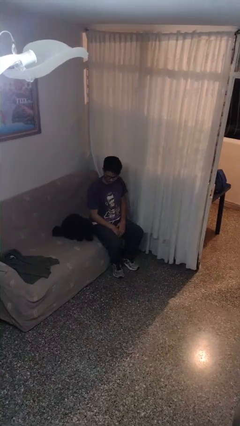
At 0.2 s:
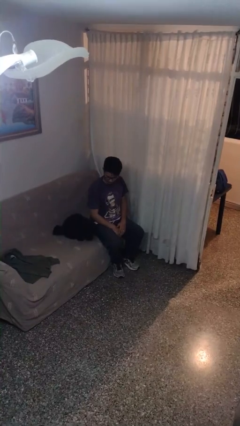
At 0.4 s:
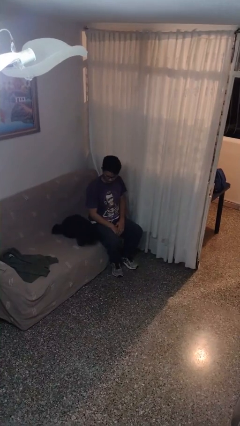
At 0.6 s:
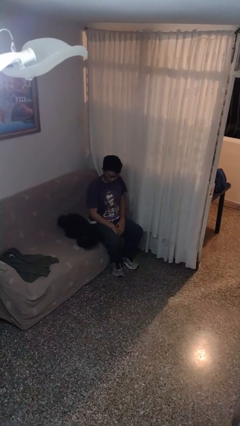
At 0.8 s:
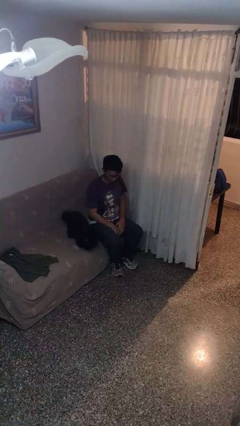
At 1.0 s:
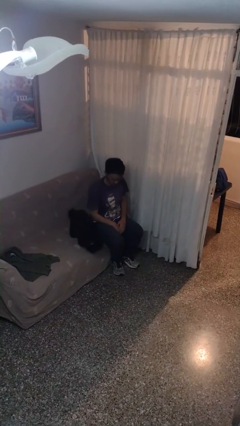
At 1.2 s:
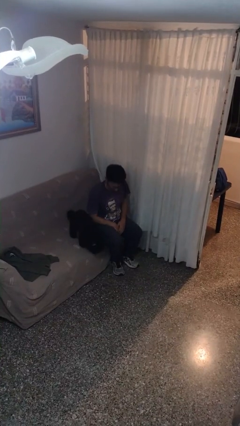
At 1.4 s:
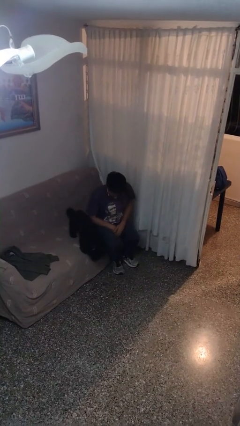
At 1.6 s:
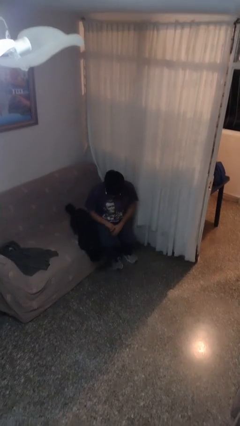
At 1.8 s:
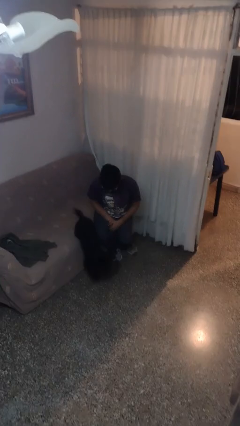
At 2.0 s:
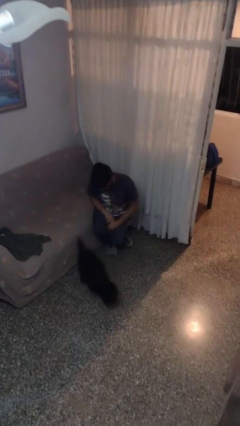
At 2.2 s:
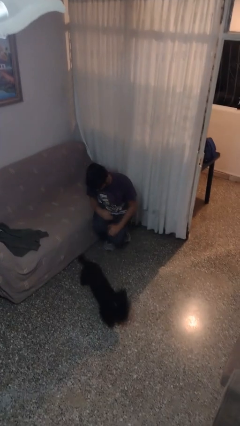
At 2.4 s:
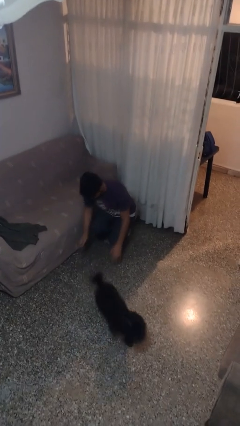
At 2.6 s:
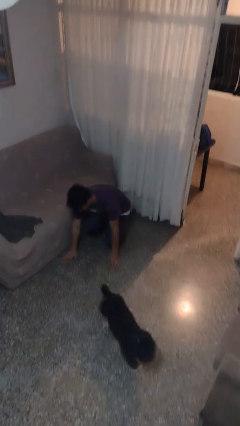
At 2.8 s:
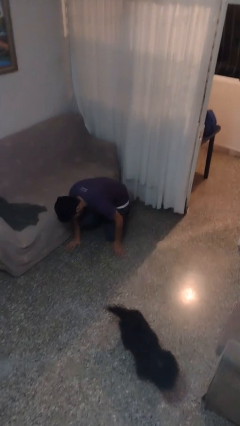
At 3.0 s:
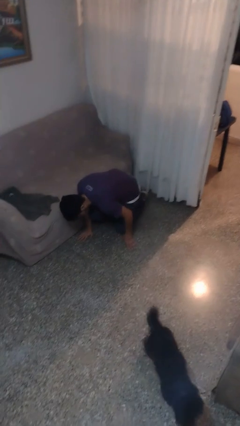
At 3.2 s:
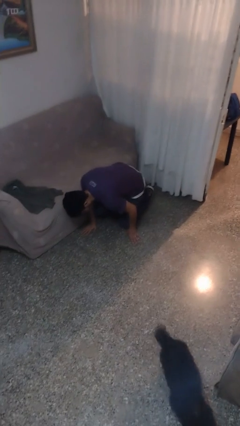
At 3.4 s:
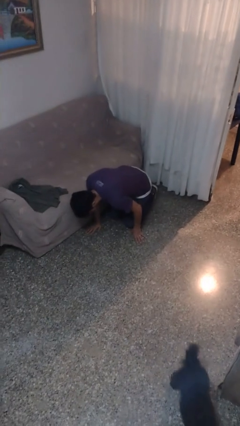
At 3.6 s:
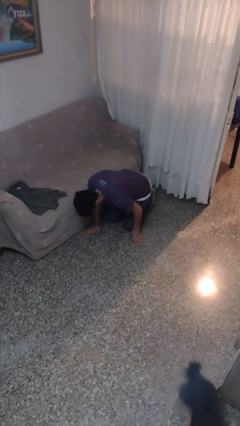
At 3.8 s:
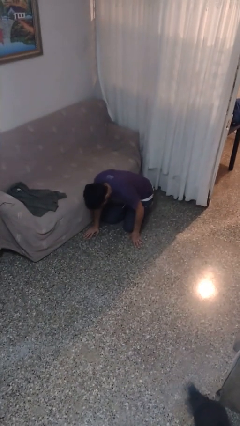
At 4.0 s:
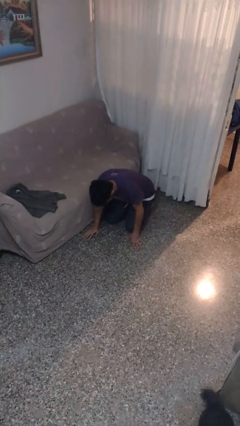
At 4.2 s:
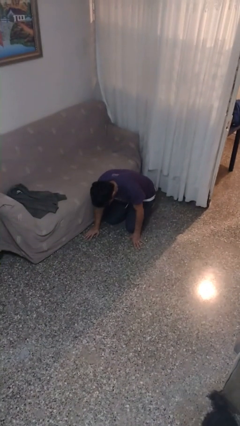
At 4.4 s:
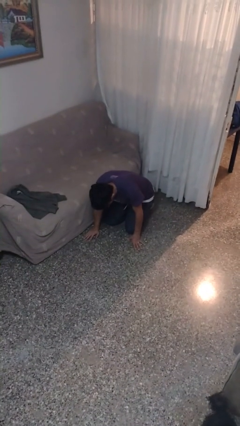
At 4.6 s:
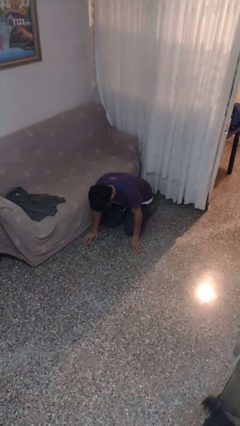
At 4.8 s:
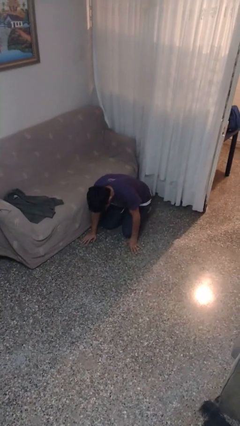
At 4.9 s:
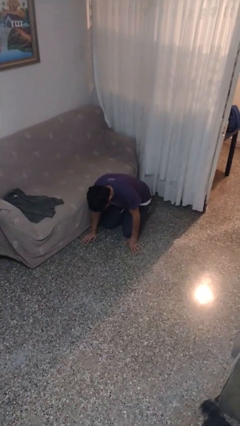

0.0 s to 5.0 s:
person falls from chair

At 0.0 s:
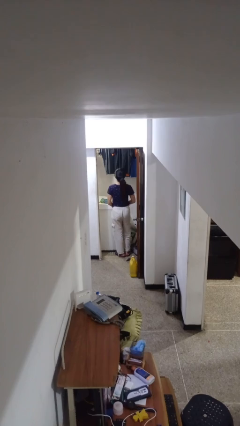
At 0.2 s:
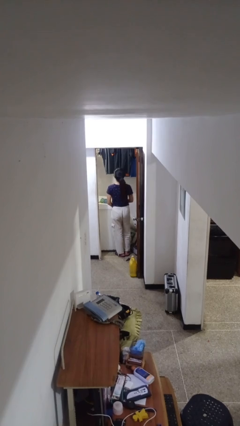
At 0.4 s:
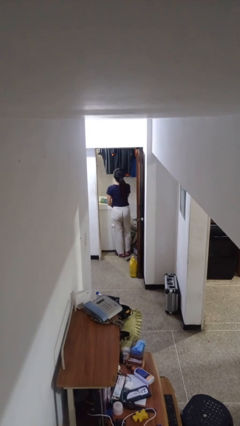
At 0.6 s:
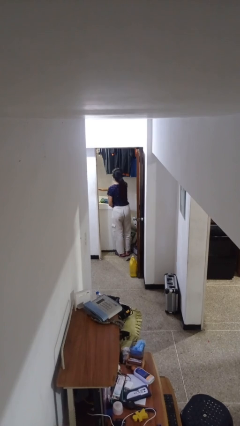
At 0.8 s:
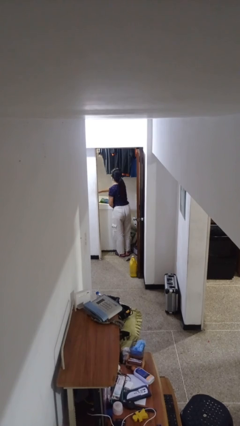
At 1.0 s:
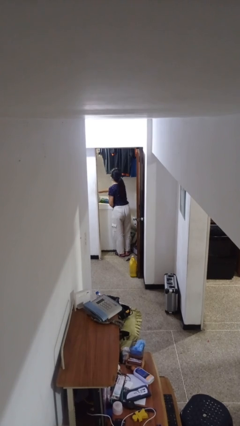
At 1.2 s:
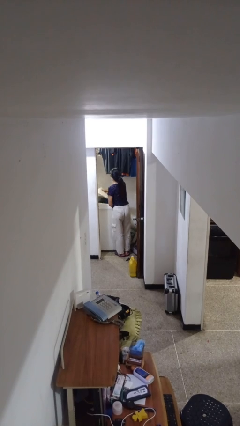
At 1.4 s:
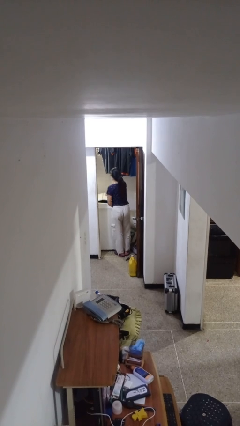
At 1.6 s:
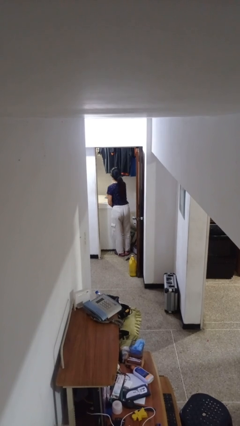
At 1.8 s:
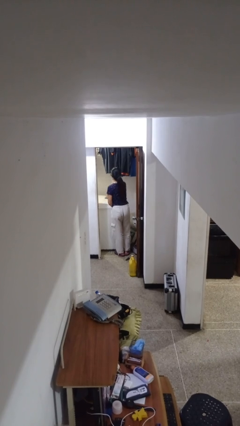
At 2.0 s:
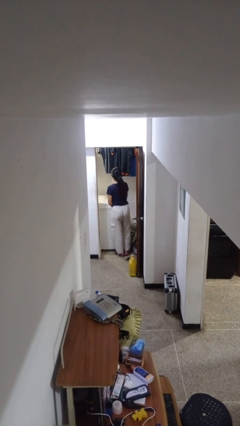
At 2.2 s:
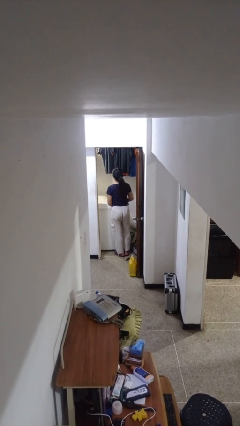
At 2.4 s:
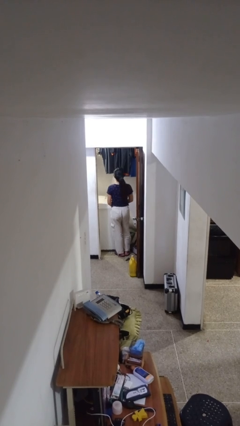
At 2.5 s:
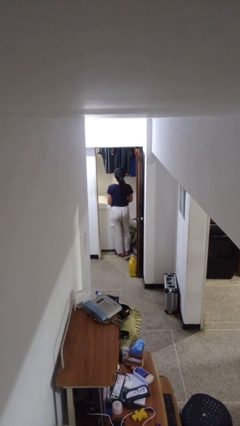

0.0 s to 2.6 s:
person closes clothes washer

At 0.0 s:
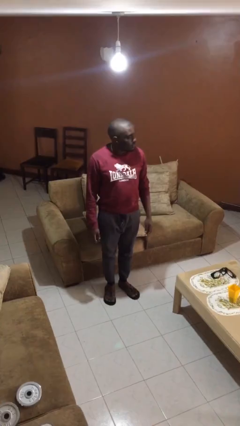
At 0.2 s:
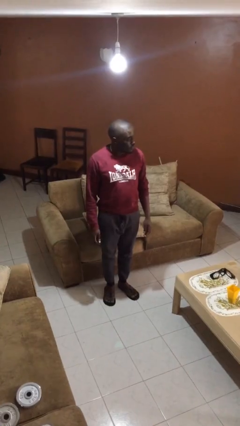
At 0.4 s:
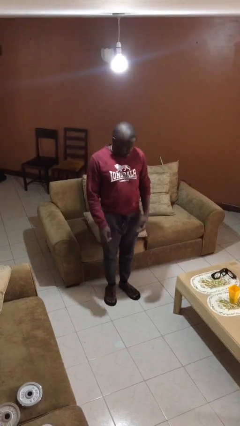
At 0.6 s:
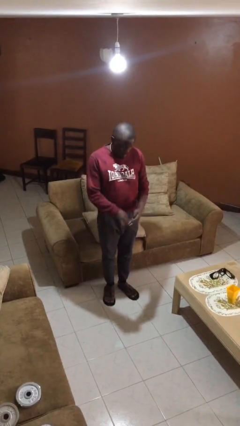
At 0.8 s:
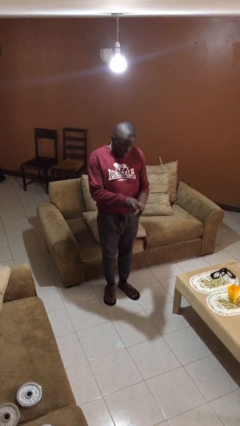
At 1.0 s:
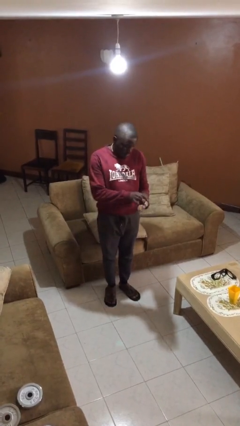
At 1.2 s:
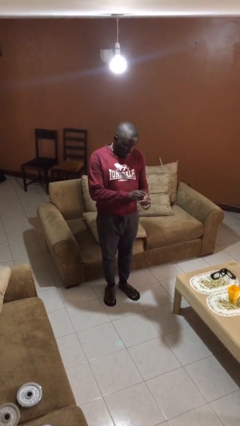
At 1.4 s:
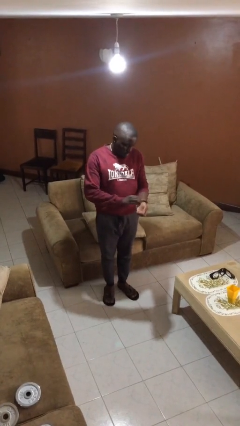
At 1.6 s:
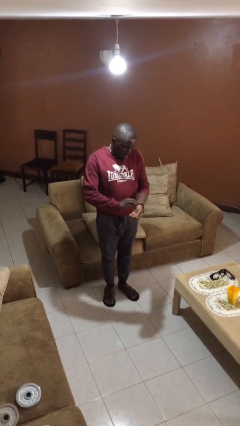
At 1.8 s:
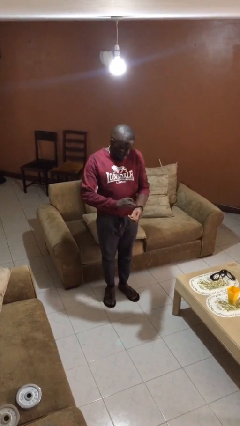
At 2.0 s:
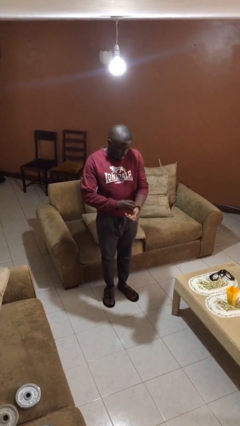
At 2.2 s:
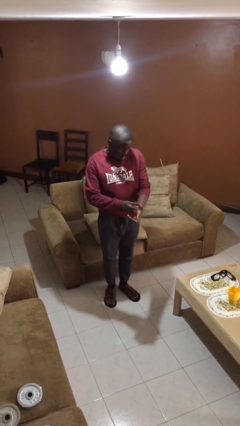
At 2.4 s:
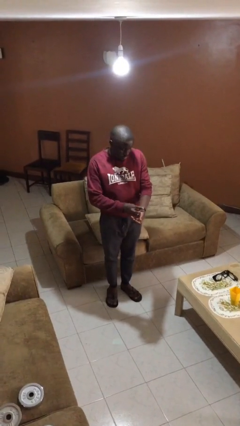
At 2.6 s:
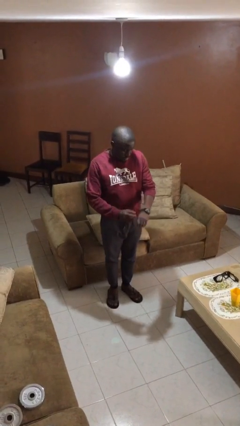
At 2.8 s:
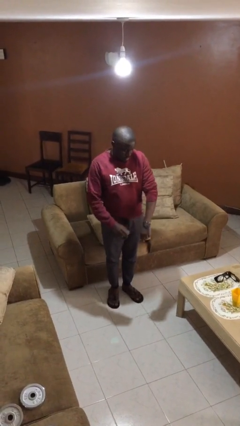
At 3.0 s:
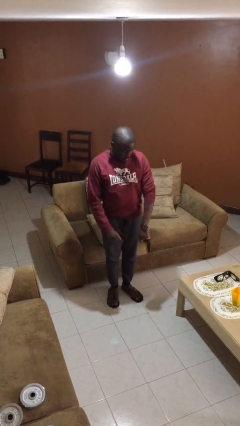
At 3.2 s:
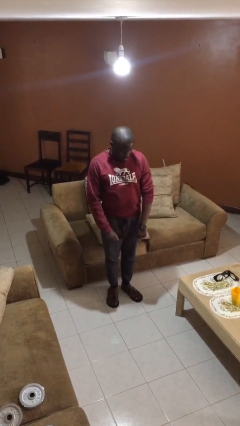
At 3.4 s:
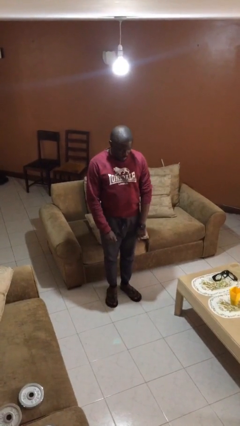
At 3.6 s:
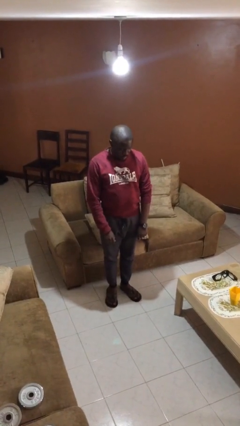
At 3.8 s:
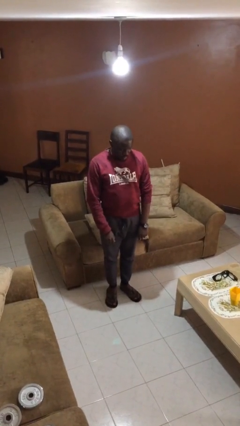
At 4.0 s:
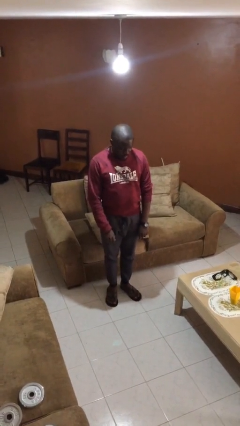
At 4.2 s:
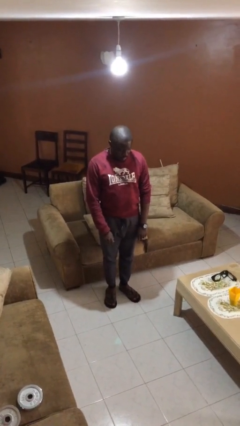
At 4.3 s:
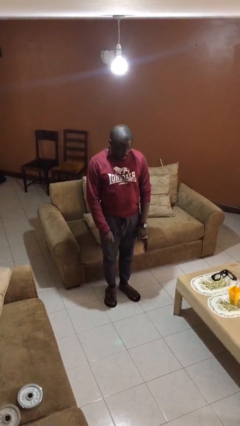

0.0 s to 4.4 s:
person puts on wristwatch

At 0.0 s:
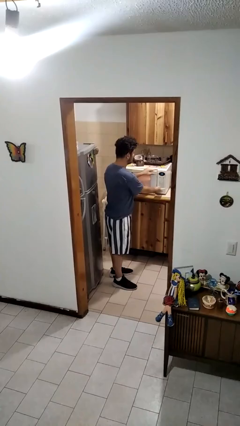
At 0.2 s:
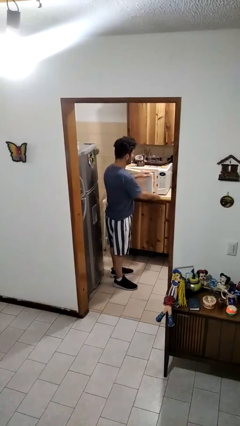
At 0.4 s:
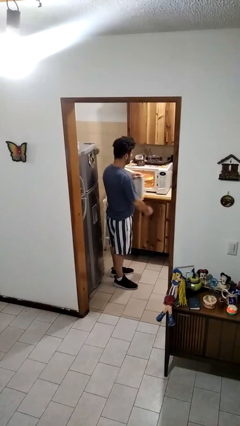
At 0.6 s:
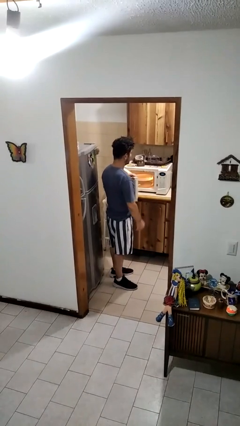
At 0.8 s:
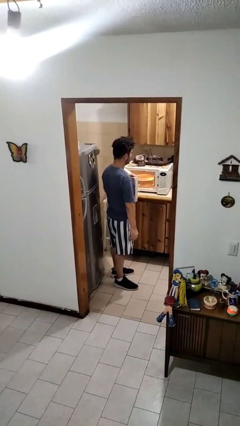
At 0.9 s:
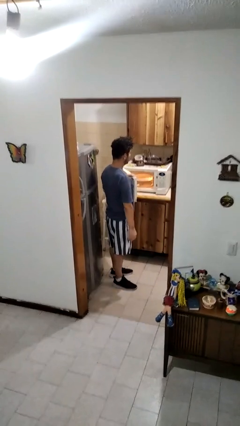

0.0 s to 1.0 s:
person opens microwave

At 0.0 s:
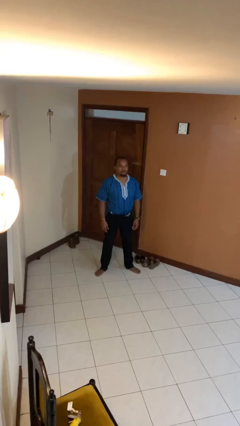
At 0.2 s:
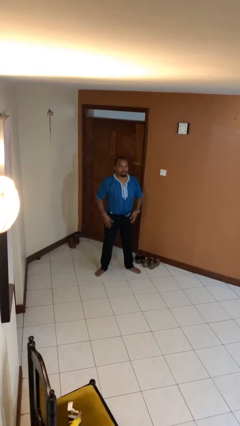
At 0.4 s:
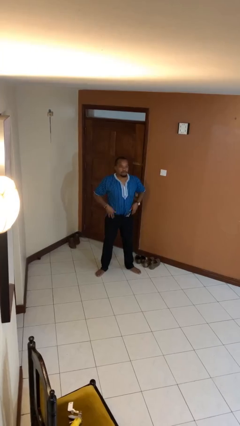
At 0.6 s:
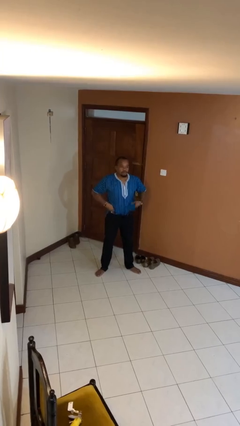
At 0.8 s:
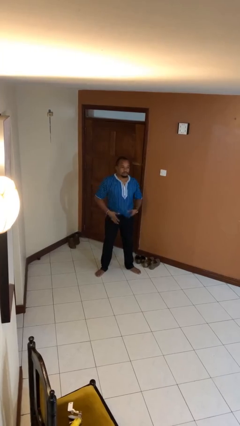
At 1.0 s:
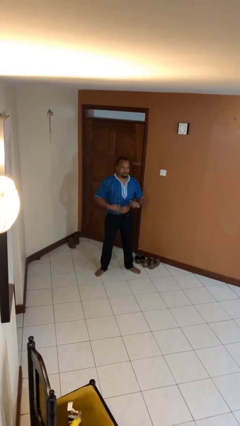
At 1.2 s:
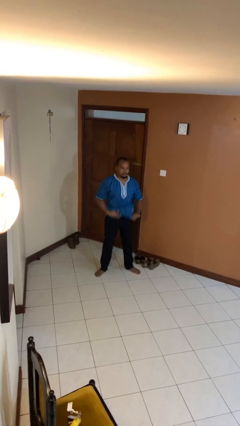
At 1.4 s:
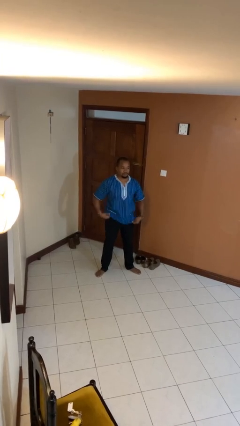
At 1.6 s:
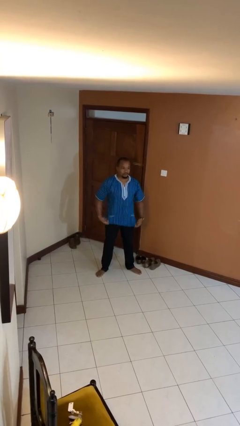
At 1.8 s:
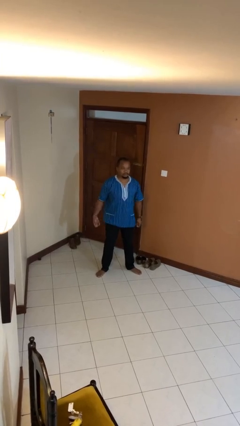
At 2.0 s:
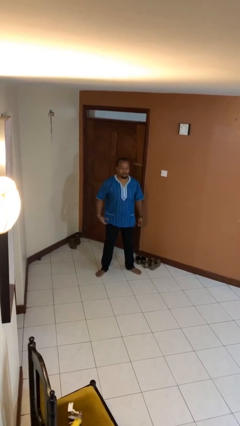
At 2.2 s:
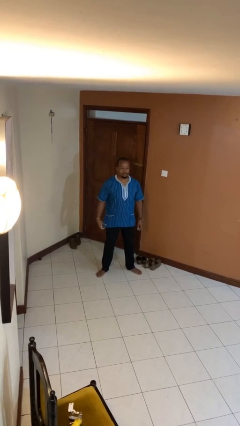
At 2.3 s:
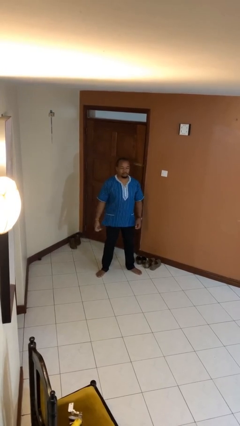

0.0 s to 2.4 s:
person untucks shirt

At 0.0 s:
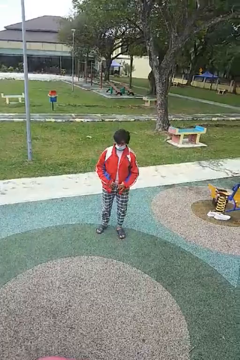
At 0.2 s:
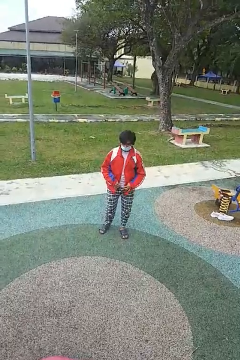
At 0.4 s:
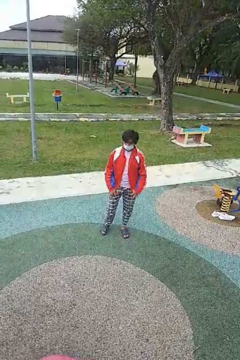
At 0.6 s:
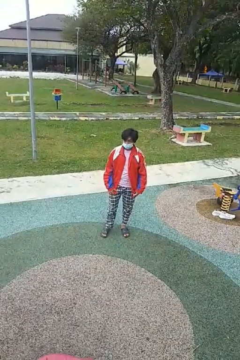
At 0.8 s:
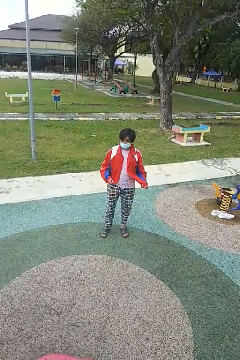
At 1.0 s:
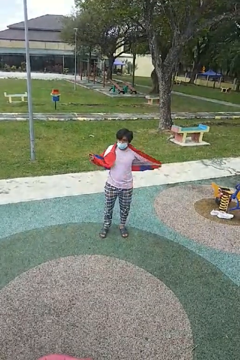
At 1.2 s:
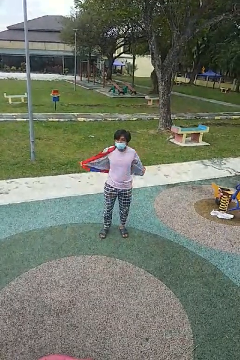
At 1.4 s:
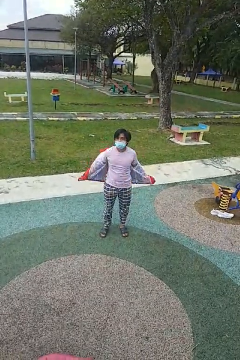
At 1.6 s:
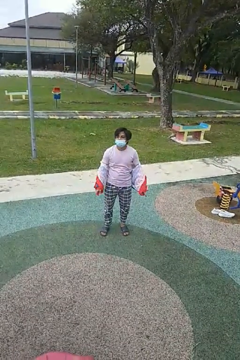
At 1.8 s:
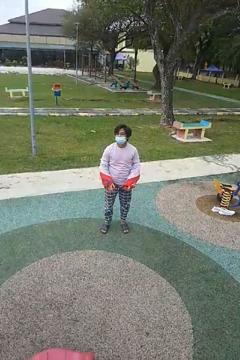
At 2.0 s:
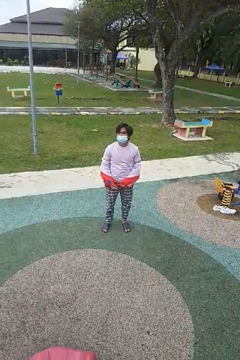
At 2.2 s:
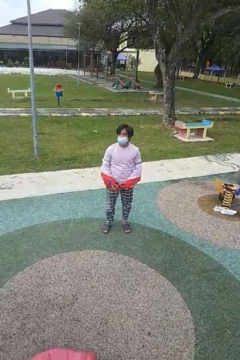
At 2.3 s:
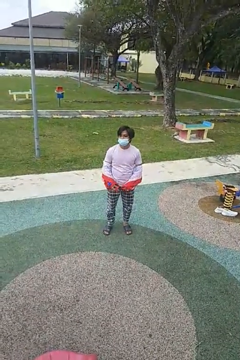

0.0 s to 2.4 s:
person takes off jacket

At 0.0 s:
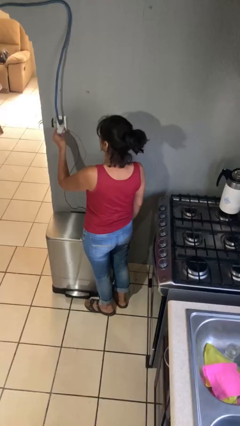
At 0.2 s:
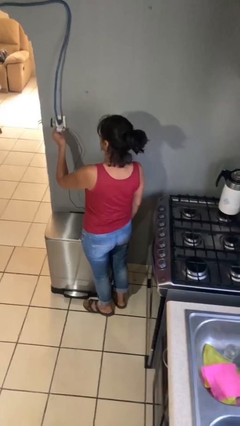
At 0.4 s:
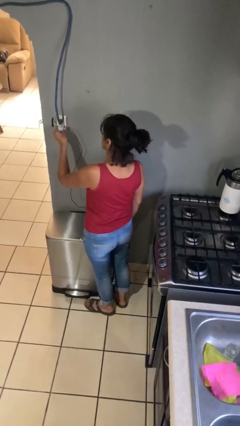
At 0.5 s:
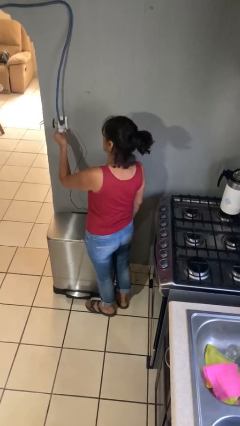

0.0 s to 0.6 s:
person plugs into electrical socket
